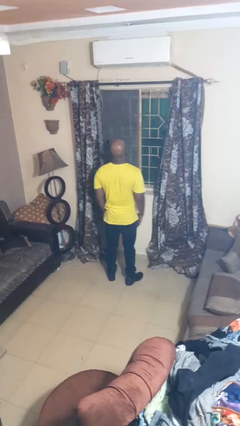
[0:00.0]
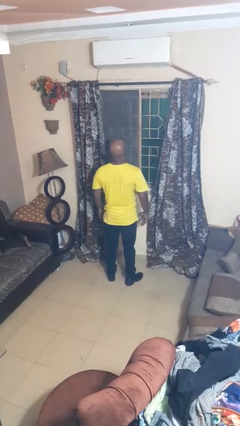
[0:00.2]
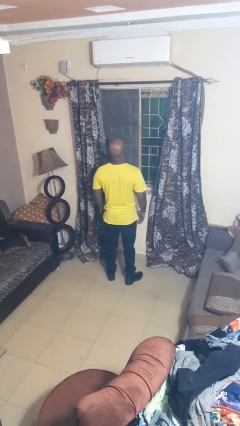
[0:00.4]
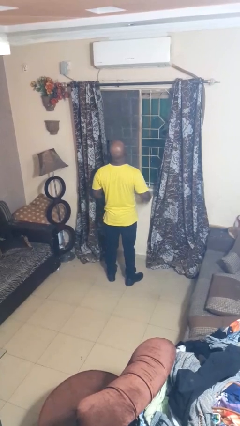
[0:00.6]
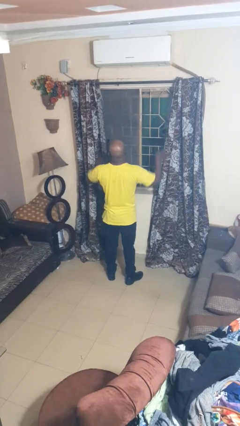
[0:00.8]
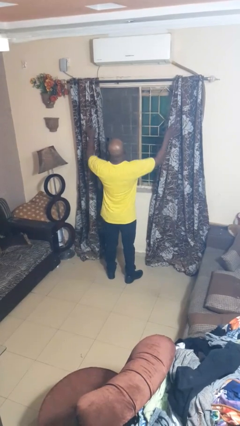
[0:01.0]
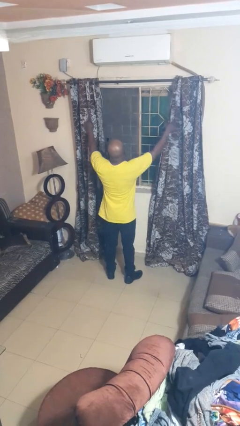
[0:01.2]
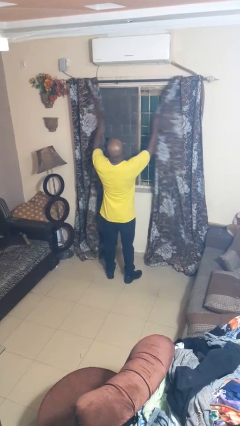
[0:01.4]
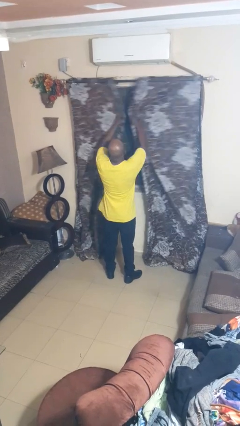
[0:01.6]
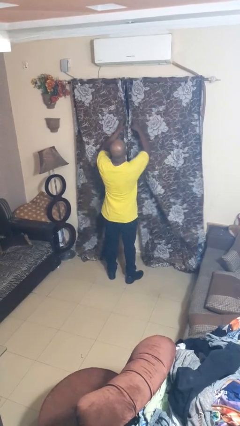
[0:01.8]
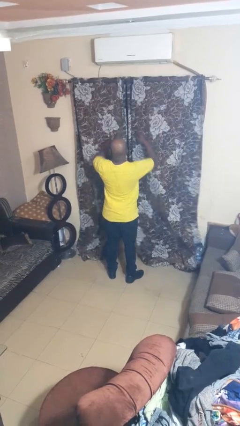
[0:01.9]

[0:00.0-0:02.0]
person closes curtains

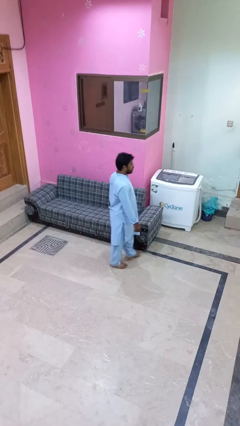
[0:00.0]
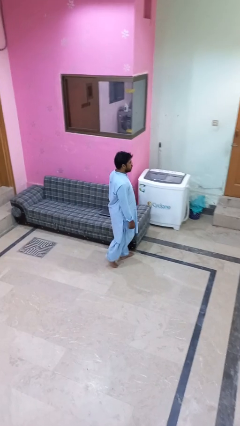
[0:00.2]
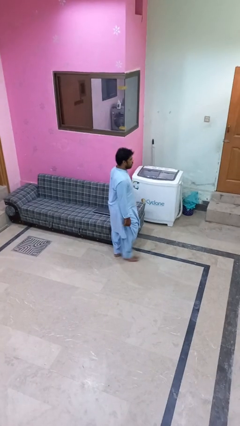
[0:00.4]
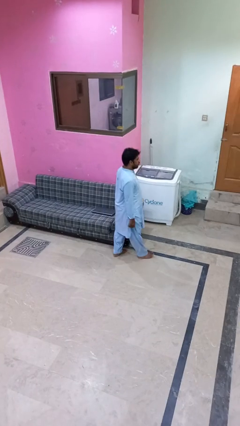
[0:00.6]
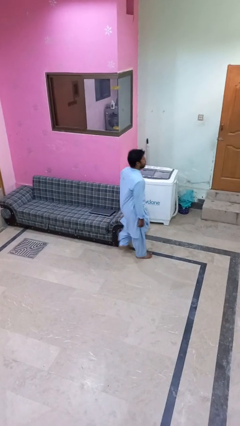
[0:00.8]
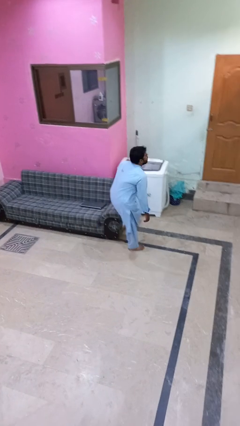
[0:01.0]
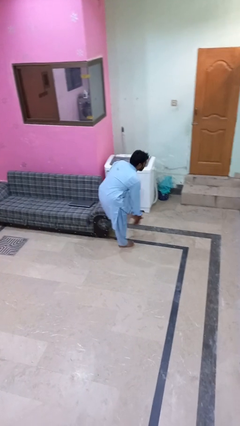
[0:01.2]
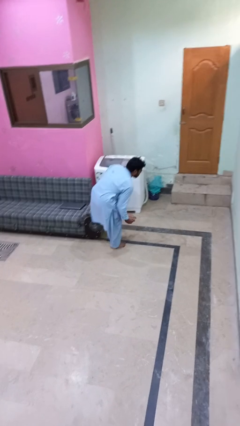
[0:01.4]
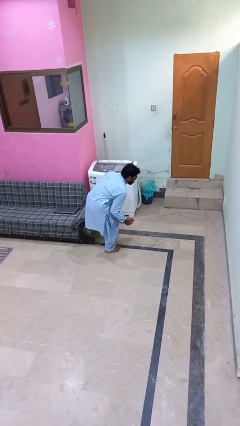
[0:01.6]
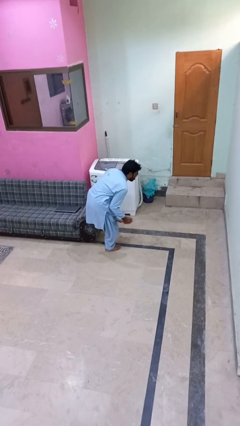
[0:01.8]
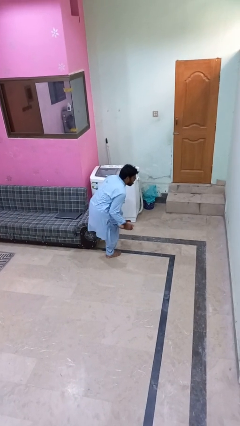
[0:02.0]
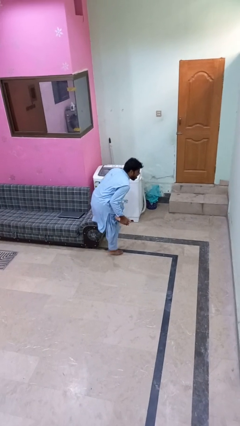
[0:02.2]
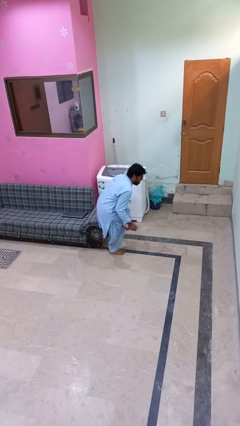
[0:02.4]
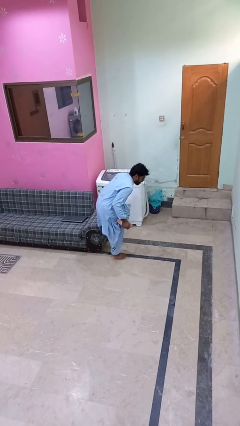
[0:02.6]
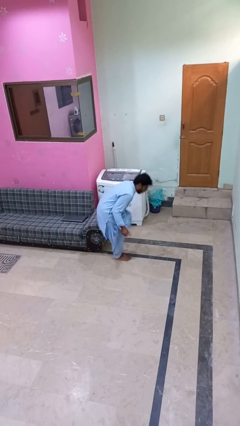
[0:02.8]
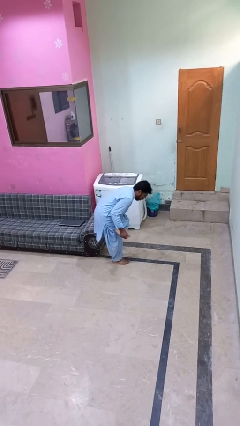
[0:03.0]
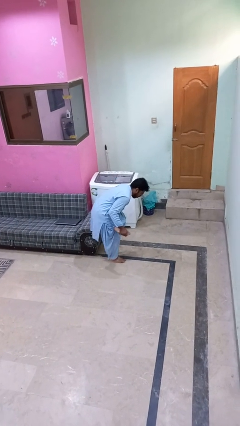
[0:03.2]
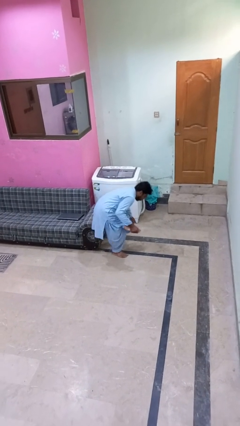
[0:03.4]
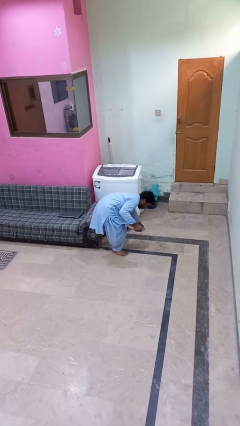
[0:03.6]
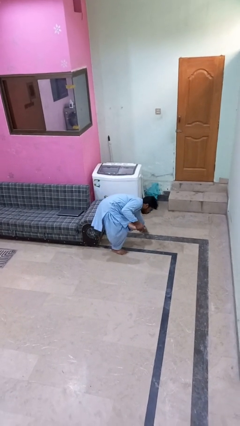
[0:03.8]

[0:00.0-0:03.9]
person trips on object on floor

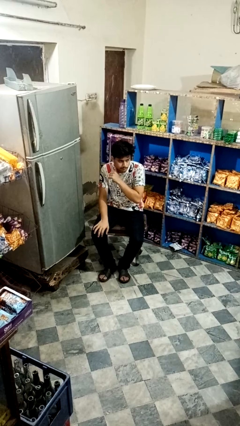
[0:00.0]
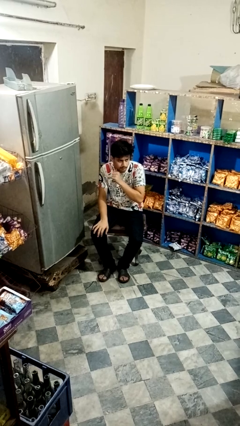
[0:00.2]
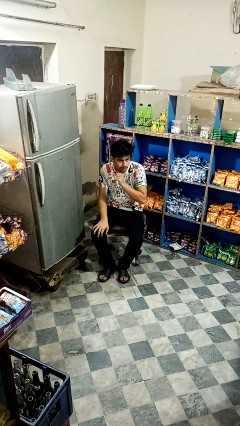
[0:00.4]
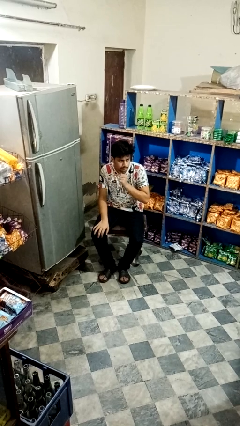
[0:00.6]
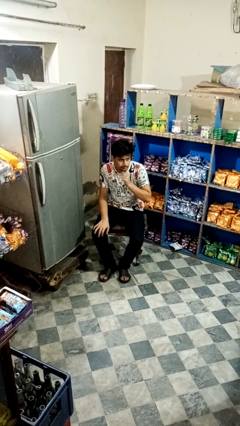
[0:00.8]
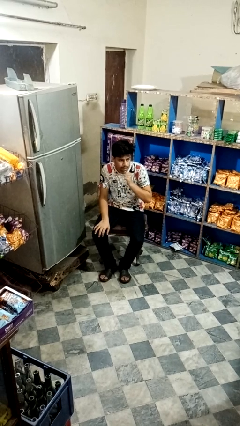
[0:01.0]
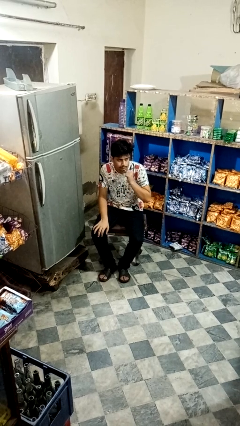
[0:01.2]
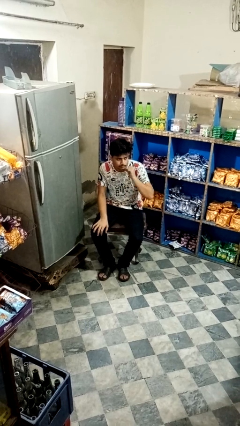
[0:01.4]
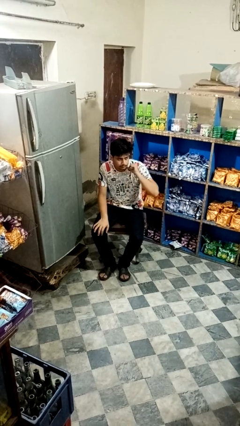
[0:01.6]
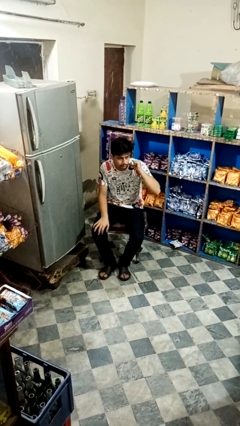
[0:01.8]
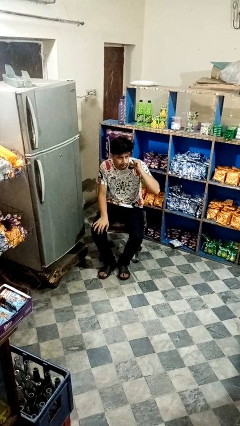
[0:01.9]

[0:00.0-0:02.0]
person gestures cut

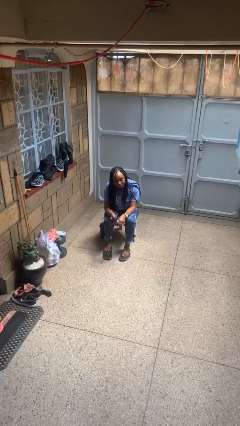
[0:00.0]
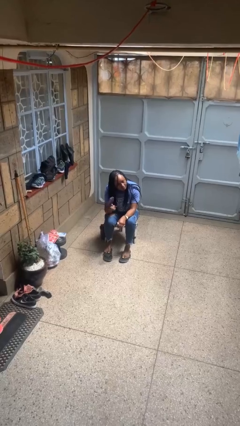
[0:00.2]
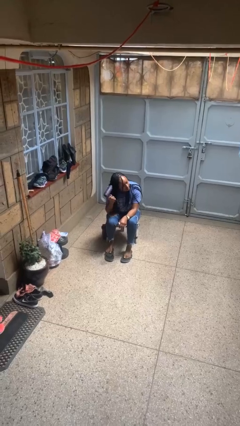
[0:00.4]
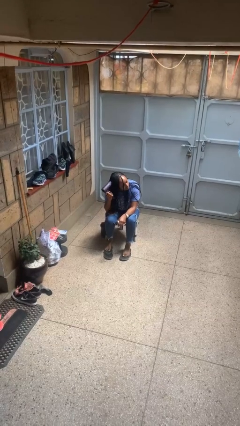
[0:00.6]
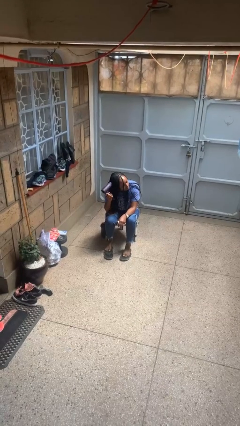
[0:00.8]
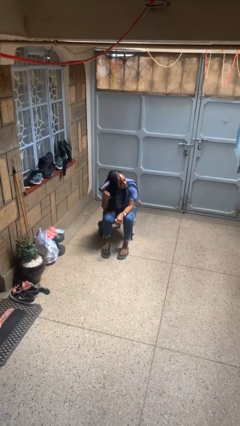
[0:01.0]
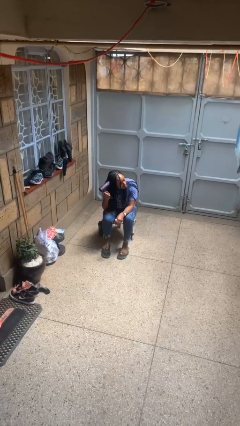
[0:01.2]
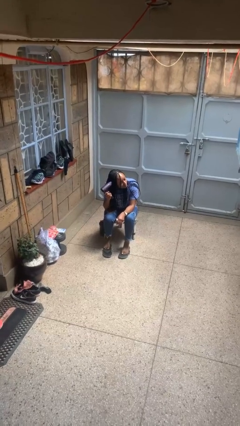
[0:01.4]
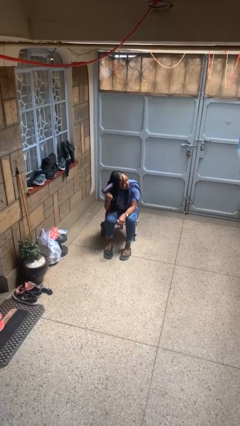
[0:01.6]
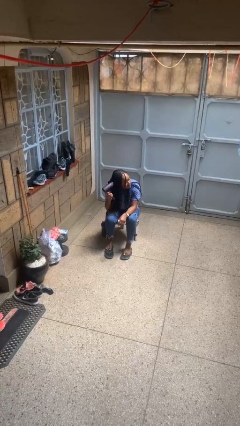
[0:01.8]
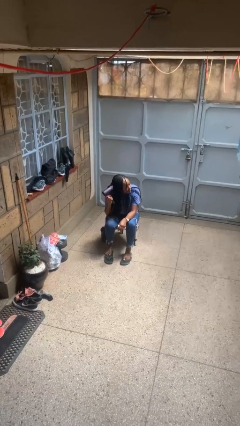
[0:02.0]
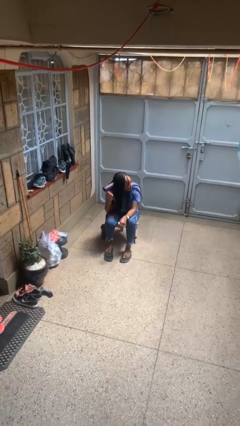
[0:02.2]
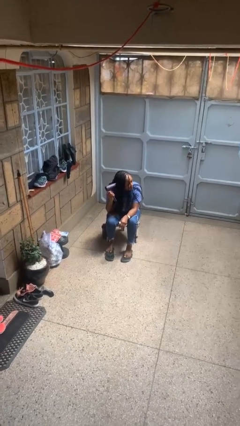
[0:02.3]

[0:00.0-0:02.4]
person dries hair with hairdryer

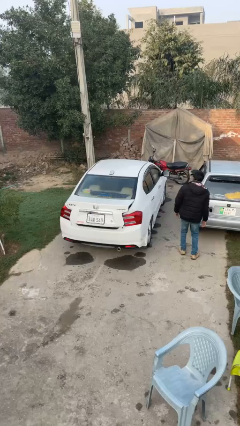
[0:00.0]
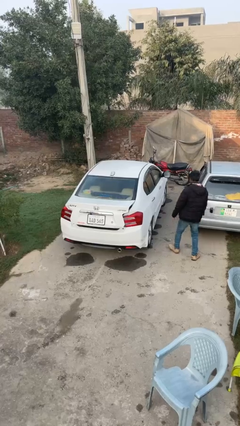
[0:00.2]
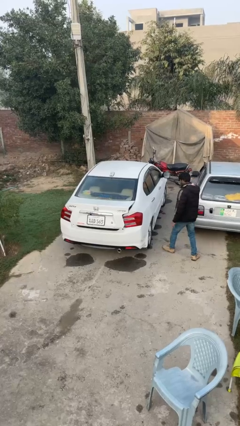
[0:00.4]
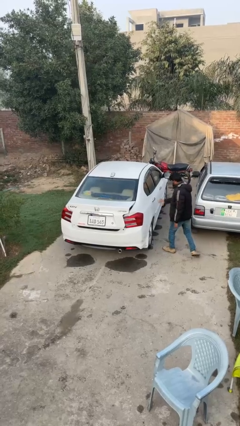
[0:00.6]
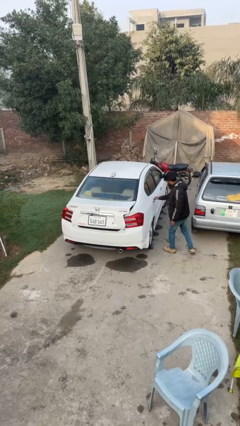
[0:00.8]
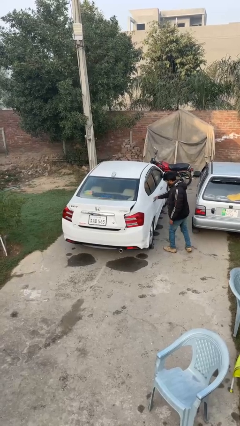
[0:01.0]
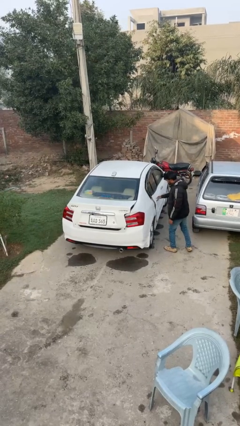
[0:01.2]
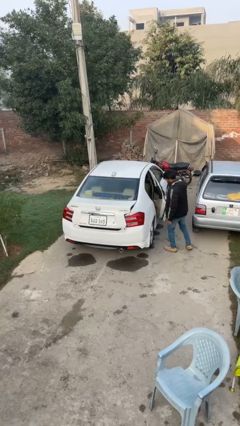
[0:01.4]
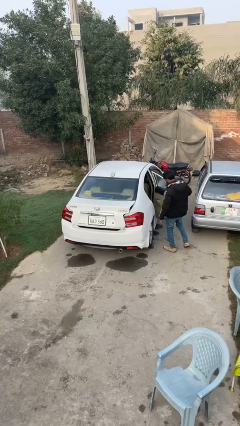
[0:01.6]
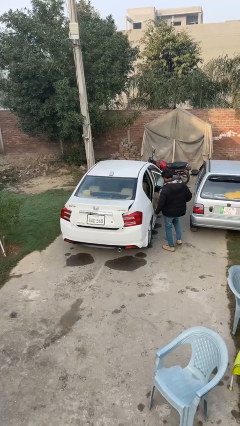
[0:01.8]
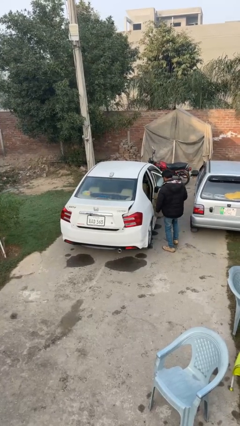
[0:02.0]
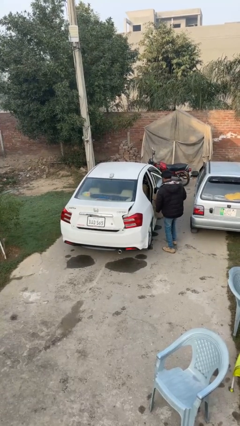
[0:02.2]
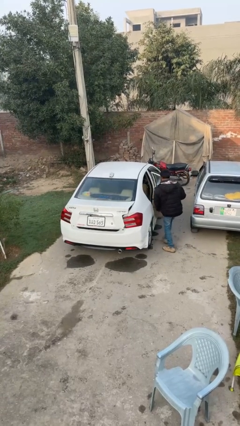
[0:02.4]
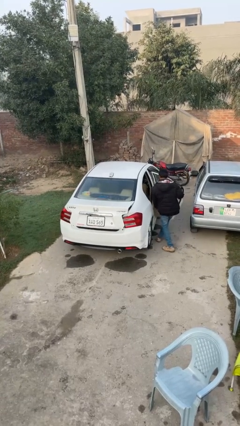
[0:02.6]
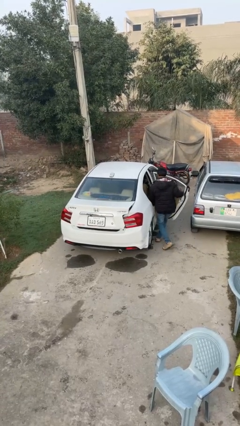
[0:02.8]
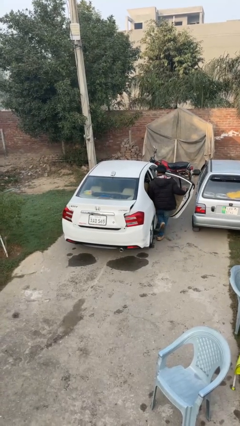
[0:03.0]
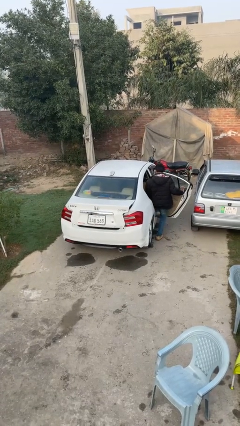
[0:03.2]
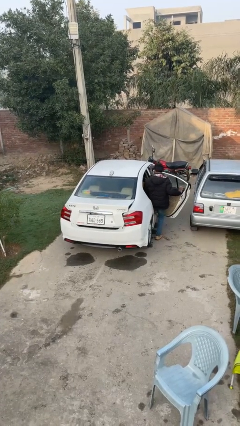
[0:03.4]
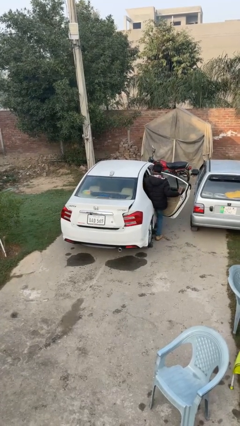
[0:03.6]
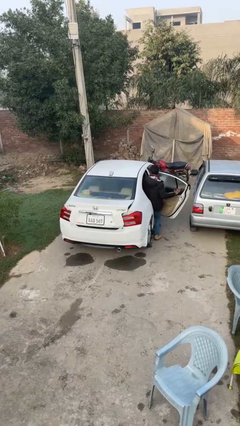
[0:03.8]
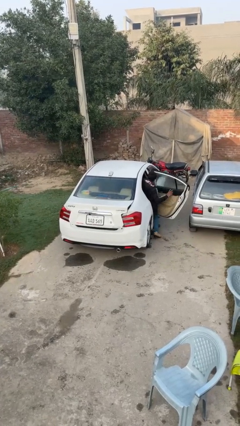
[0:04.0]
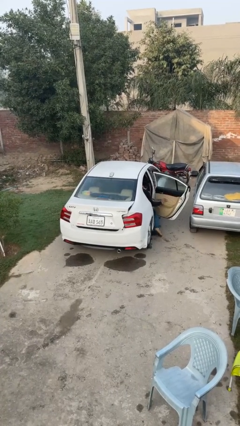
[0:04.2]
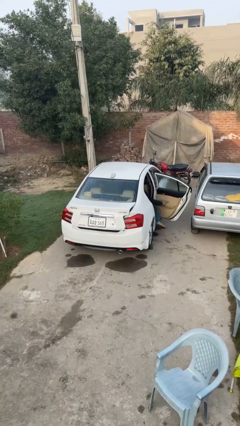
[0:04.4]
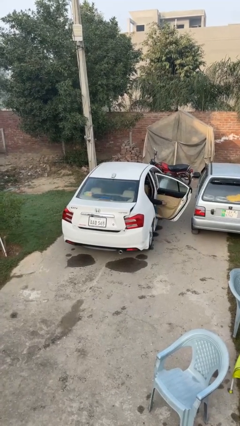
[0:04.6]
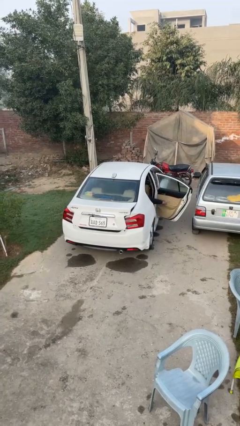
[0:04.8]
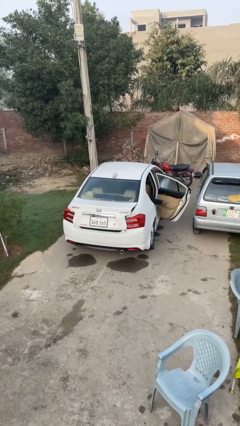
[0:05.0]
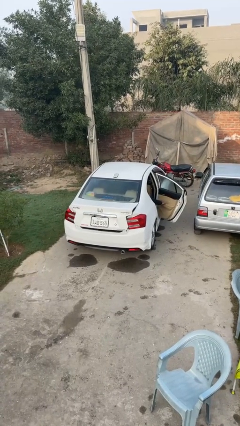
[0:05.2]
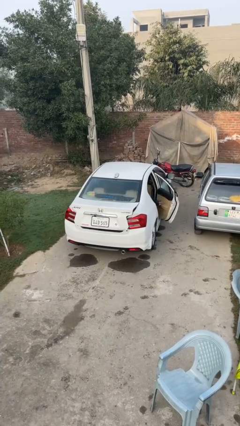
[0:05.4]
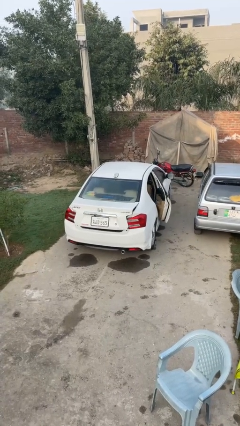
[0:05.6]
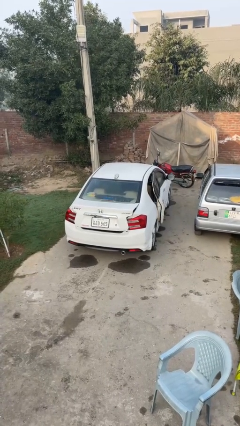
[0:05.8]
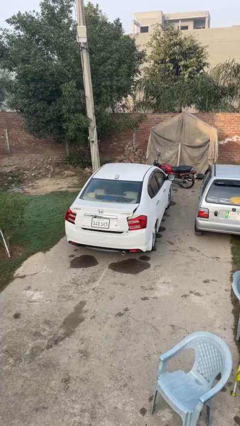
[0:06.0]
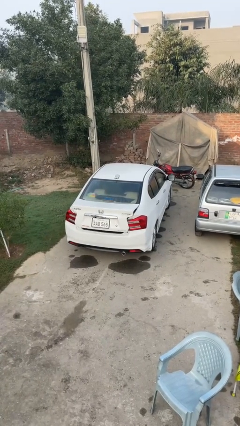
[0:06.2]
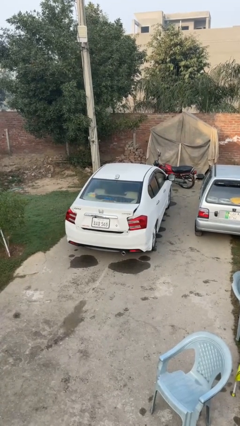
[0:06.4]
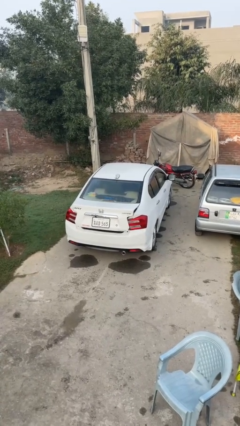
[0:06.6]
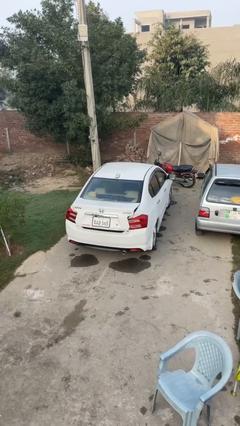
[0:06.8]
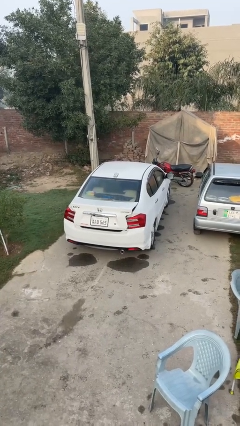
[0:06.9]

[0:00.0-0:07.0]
car picks up person

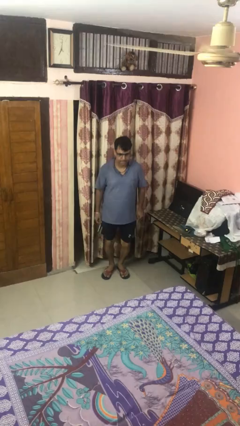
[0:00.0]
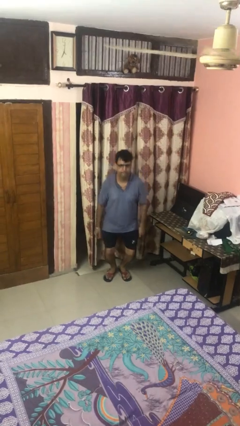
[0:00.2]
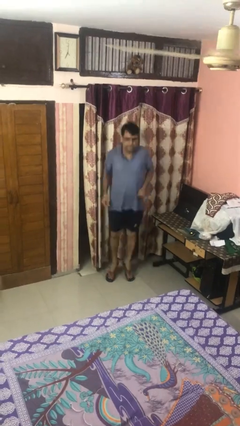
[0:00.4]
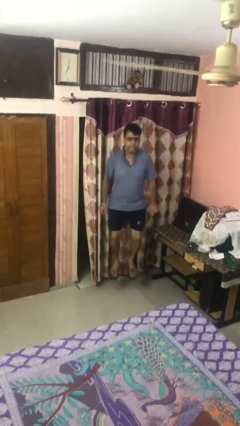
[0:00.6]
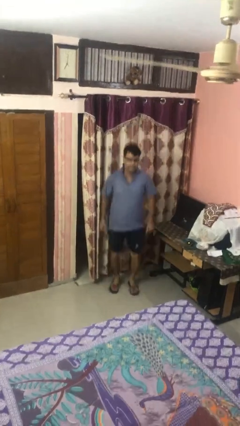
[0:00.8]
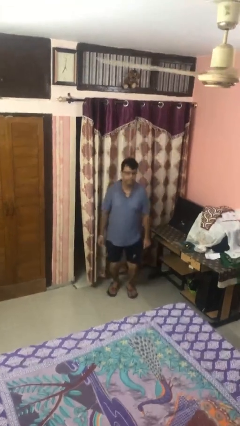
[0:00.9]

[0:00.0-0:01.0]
person jumps
